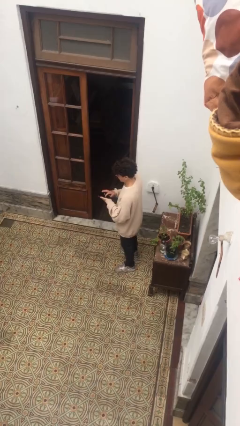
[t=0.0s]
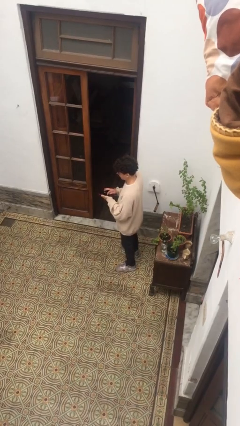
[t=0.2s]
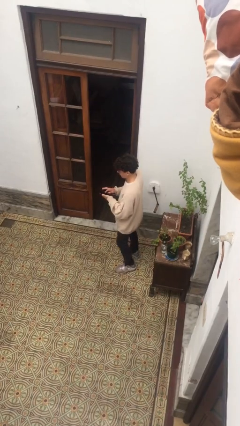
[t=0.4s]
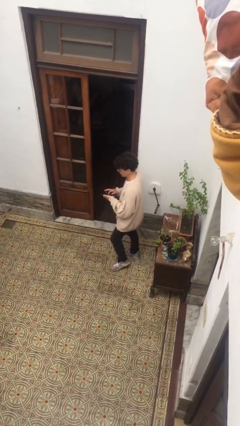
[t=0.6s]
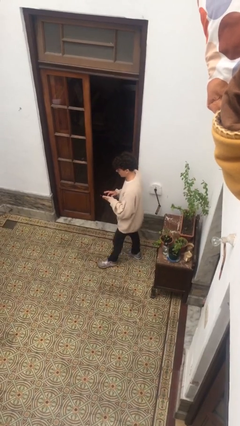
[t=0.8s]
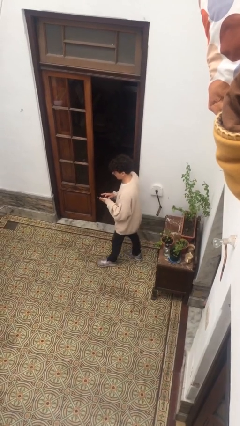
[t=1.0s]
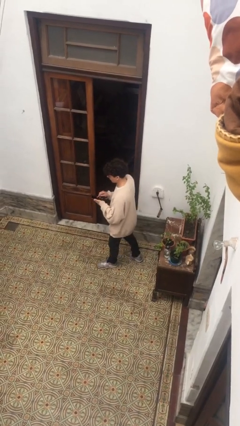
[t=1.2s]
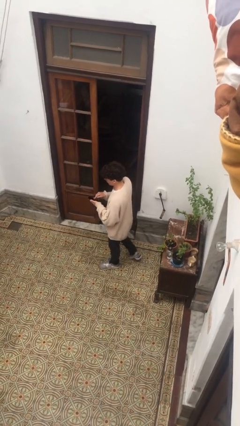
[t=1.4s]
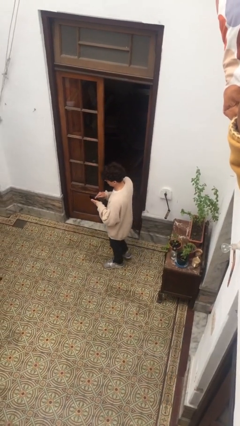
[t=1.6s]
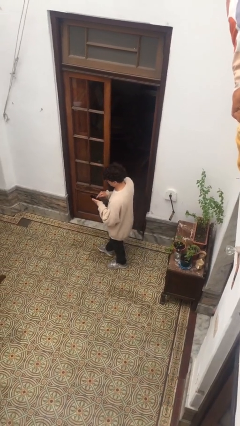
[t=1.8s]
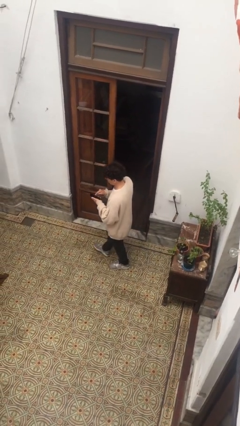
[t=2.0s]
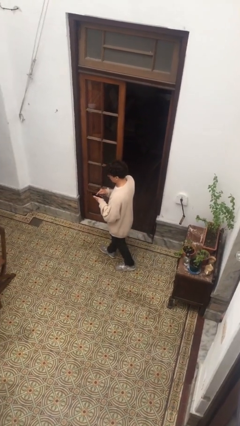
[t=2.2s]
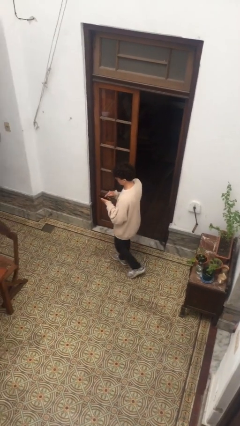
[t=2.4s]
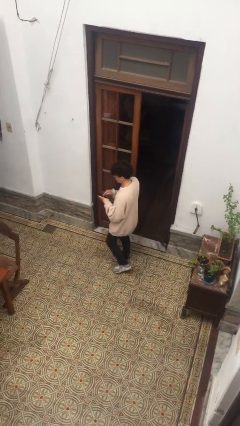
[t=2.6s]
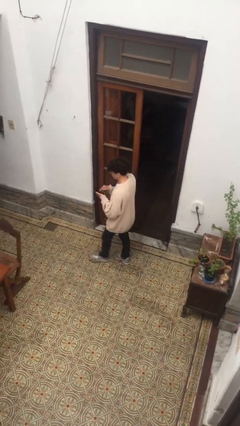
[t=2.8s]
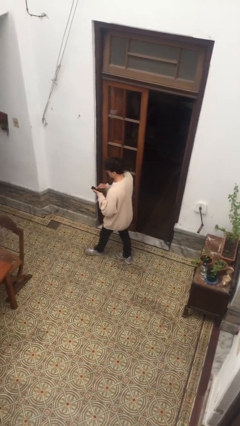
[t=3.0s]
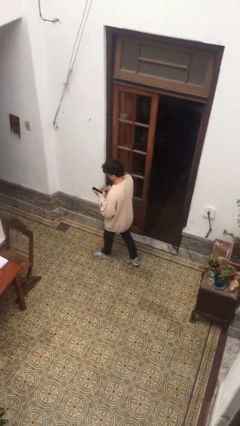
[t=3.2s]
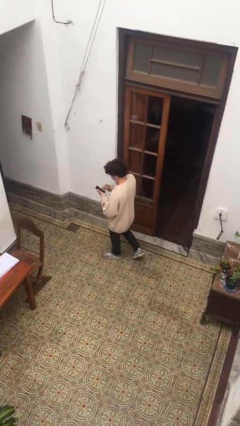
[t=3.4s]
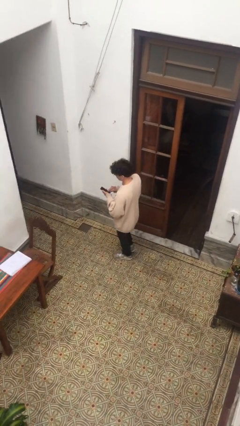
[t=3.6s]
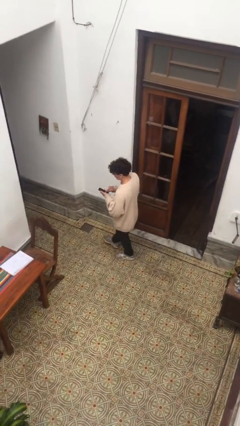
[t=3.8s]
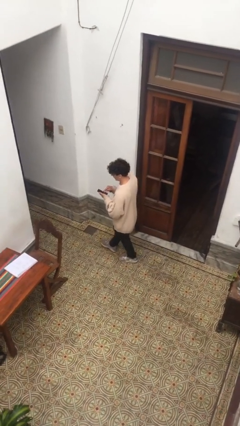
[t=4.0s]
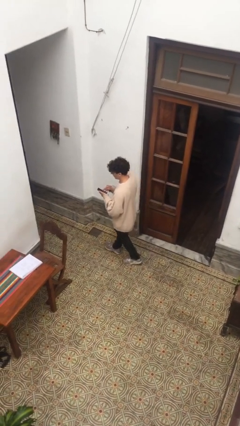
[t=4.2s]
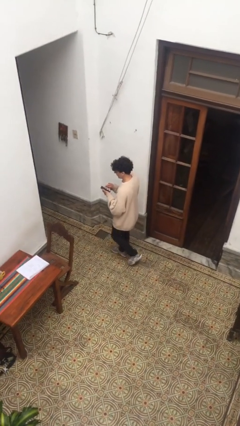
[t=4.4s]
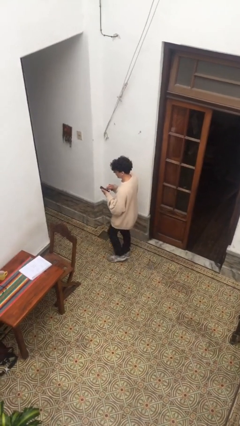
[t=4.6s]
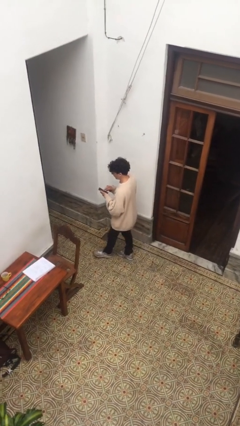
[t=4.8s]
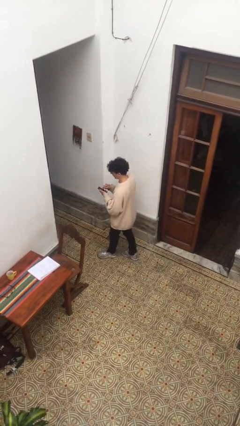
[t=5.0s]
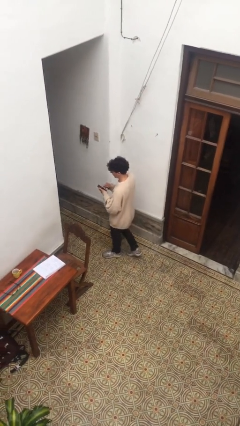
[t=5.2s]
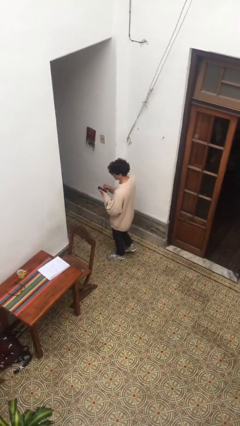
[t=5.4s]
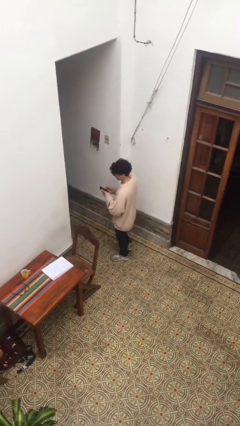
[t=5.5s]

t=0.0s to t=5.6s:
person texts on phone

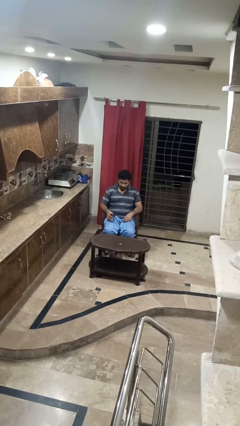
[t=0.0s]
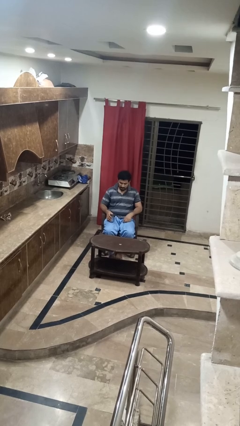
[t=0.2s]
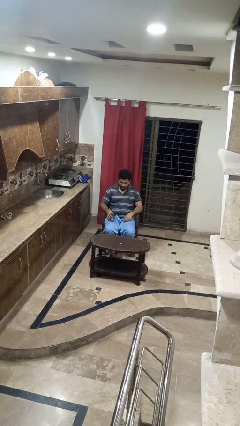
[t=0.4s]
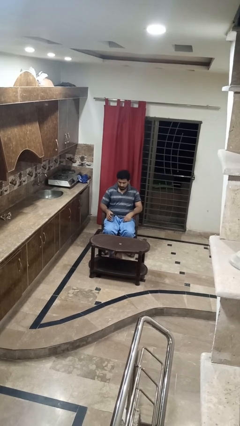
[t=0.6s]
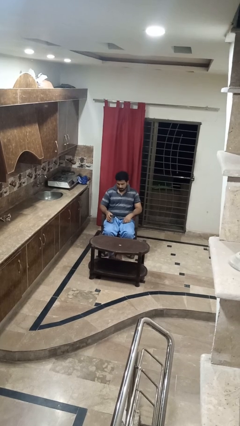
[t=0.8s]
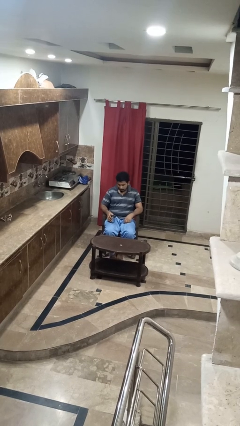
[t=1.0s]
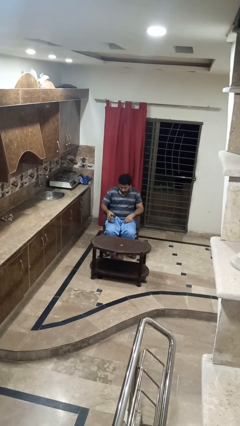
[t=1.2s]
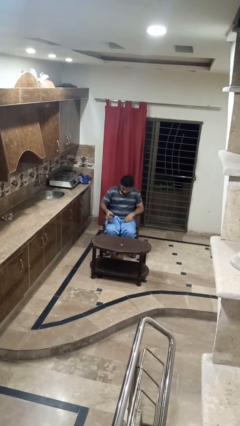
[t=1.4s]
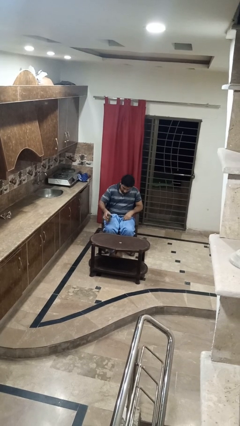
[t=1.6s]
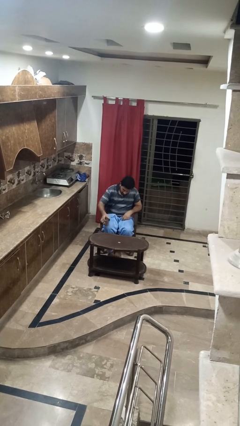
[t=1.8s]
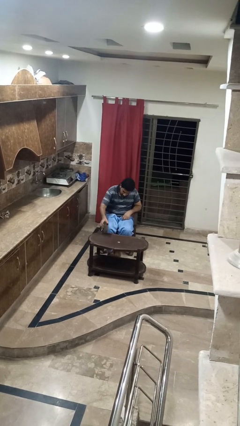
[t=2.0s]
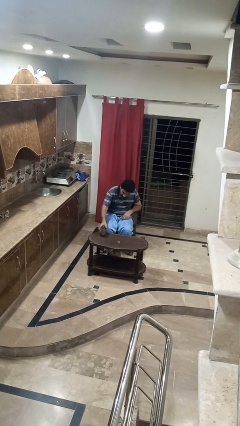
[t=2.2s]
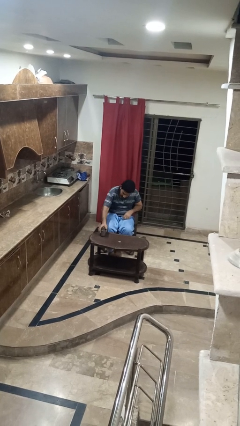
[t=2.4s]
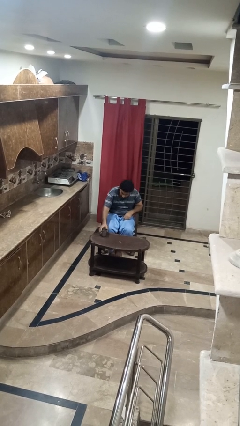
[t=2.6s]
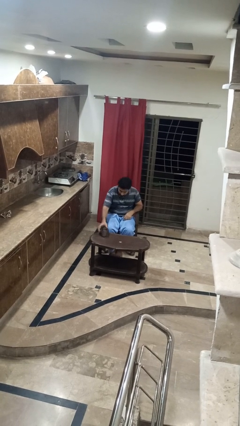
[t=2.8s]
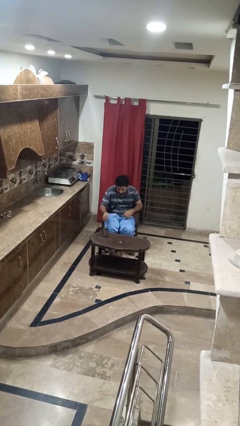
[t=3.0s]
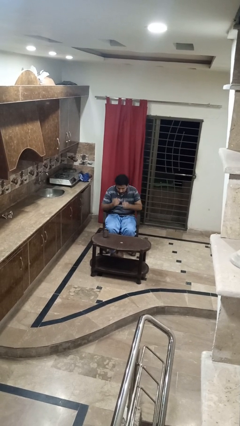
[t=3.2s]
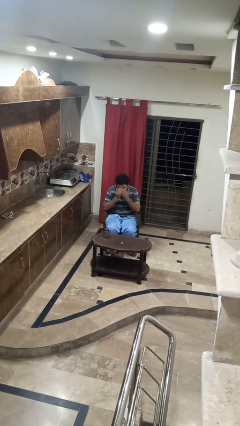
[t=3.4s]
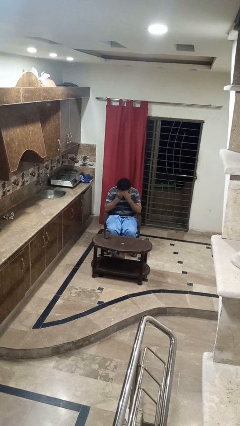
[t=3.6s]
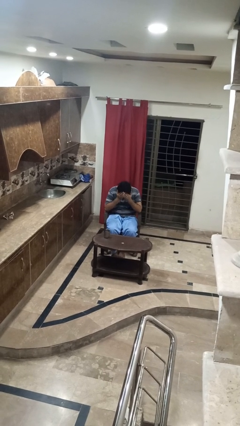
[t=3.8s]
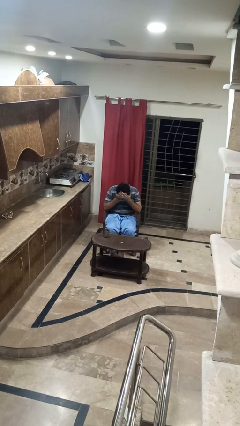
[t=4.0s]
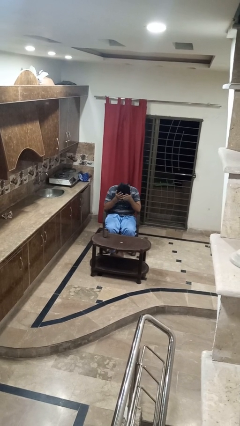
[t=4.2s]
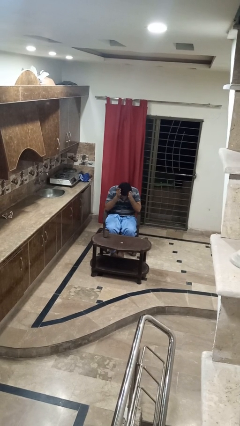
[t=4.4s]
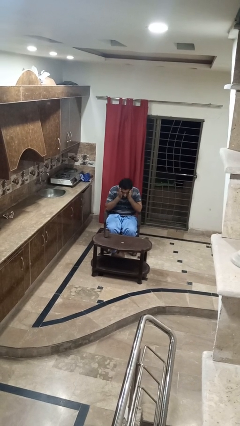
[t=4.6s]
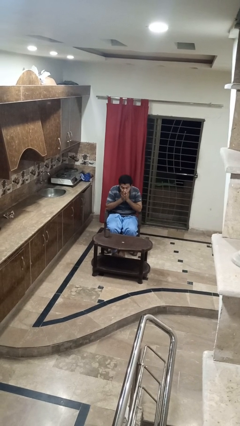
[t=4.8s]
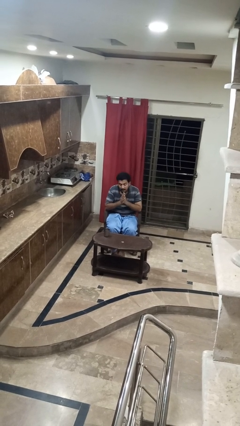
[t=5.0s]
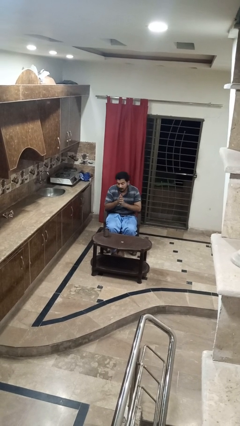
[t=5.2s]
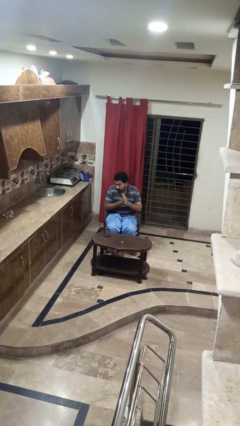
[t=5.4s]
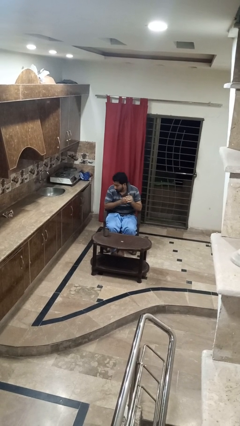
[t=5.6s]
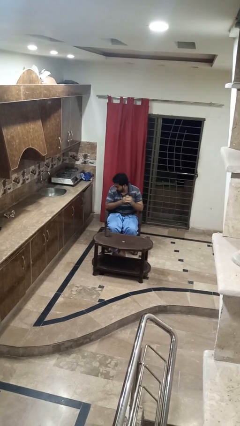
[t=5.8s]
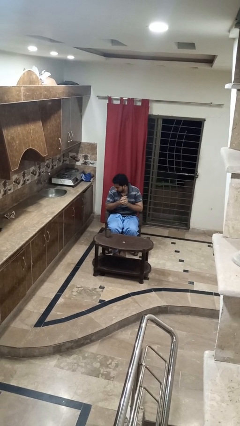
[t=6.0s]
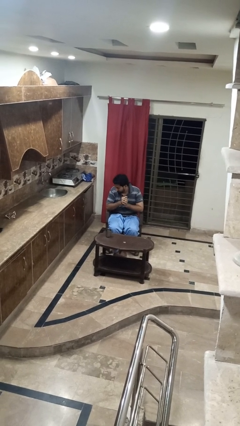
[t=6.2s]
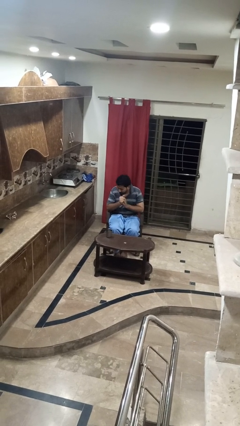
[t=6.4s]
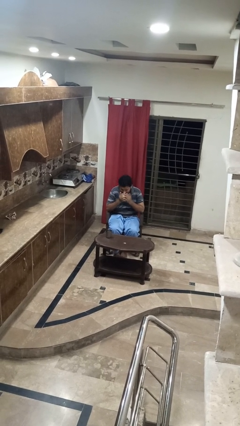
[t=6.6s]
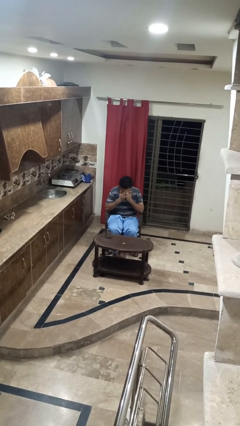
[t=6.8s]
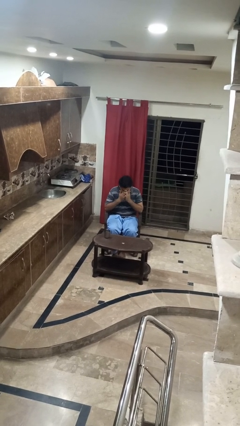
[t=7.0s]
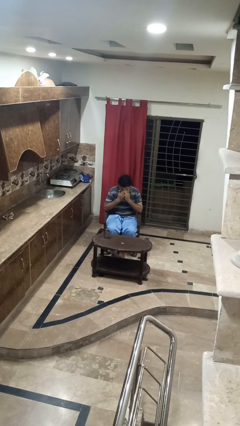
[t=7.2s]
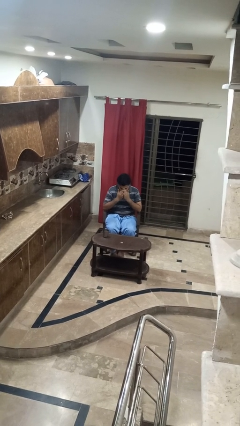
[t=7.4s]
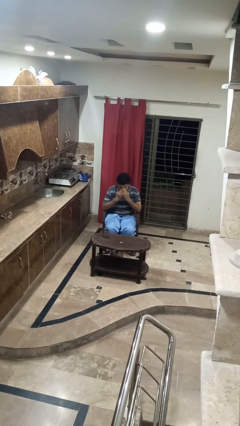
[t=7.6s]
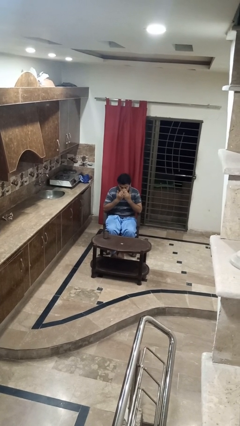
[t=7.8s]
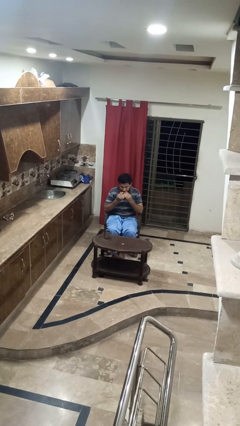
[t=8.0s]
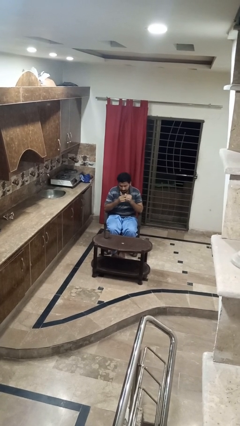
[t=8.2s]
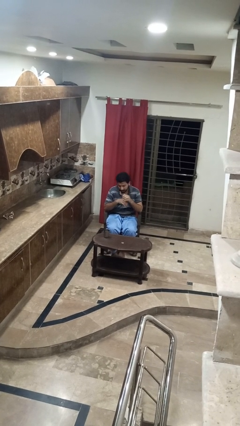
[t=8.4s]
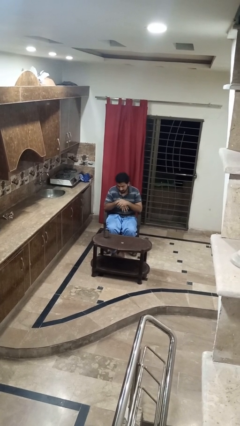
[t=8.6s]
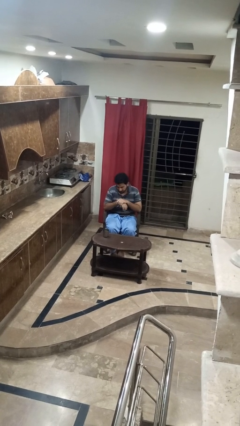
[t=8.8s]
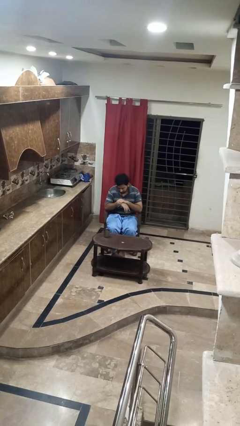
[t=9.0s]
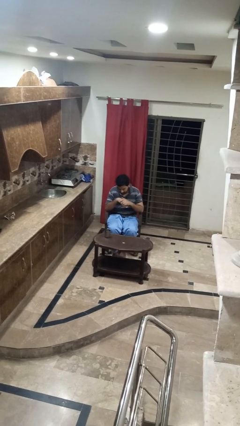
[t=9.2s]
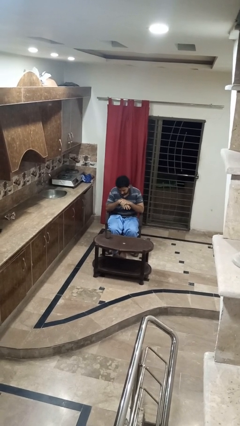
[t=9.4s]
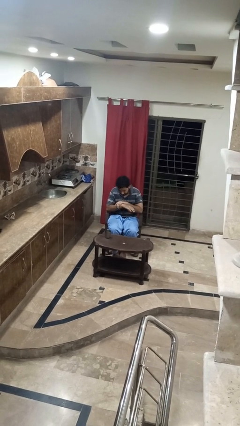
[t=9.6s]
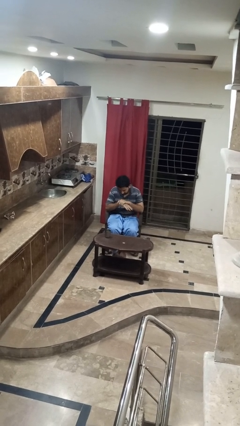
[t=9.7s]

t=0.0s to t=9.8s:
person spills on table

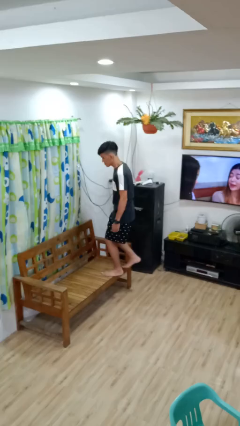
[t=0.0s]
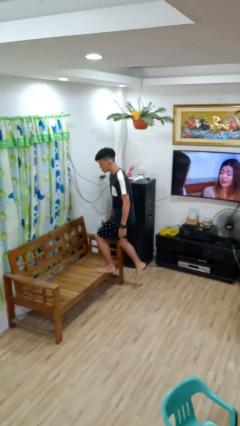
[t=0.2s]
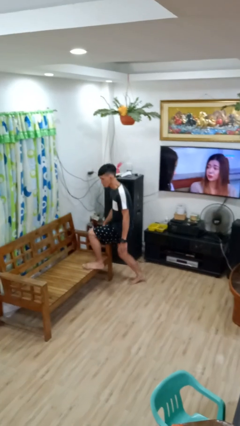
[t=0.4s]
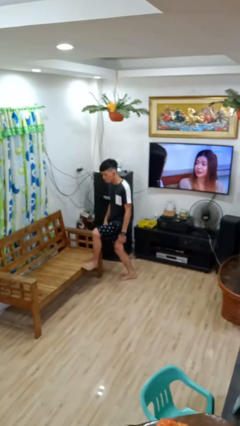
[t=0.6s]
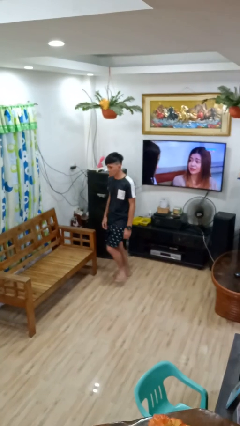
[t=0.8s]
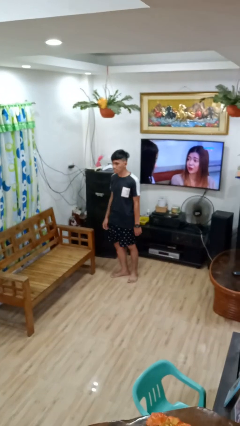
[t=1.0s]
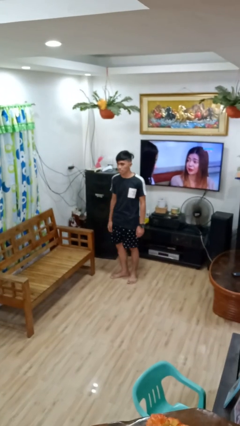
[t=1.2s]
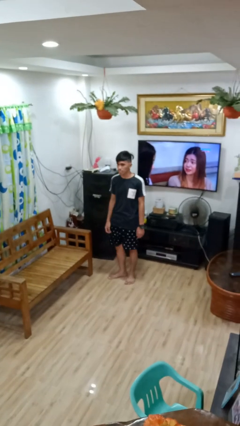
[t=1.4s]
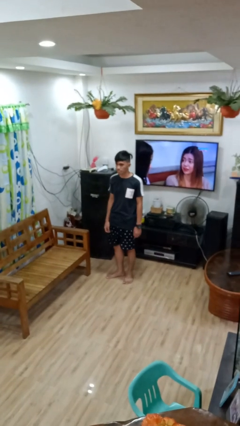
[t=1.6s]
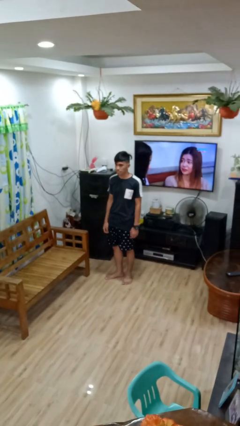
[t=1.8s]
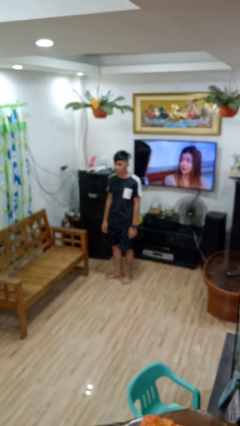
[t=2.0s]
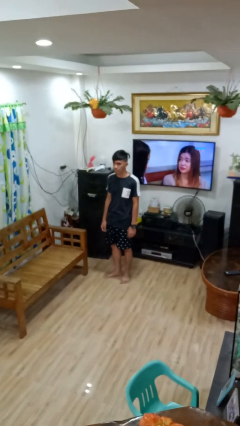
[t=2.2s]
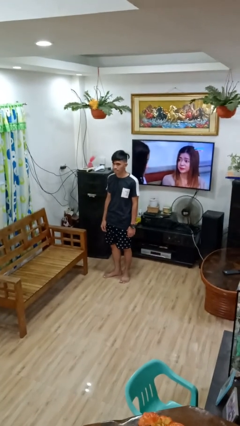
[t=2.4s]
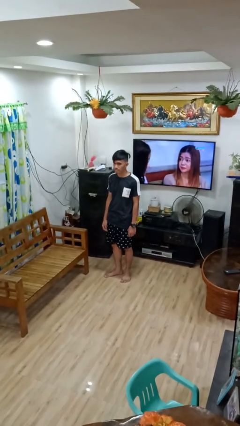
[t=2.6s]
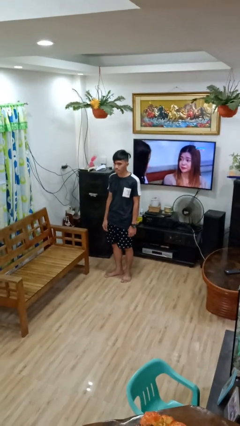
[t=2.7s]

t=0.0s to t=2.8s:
person climbs off couch
